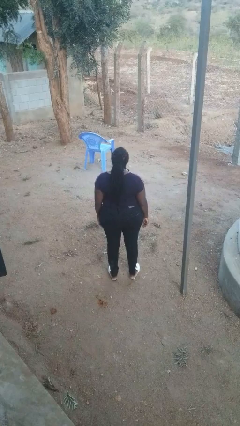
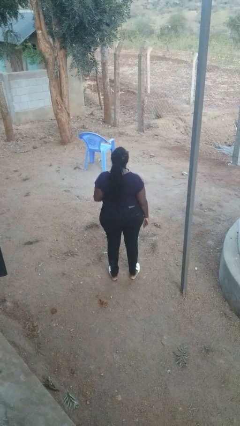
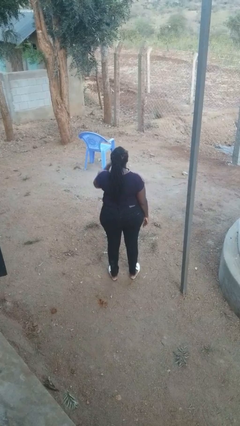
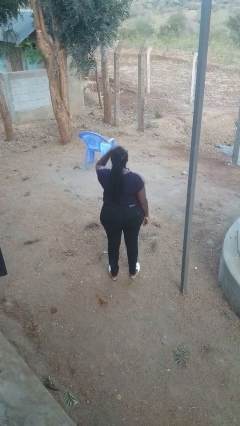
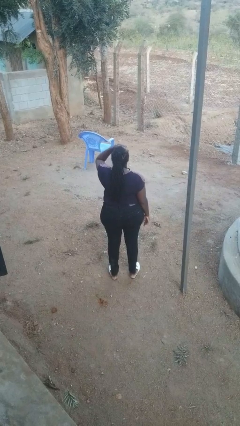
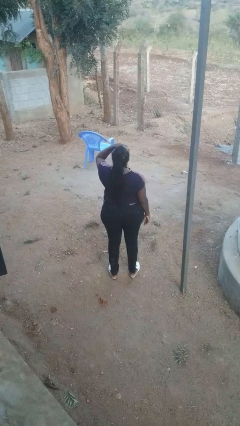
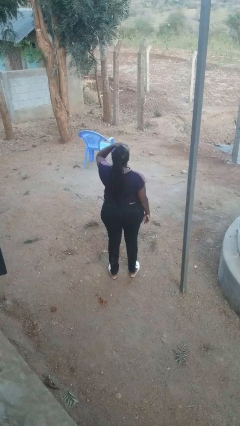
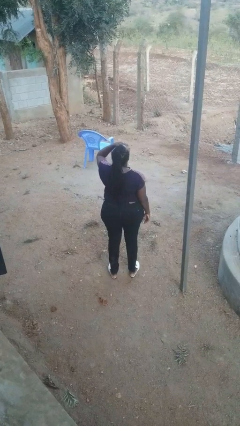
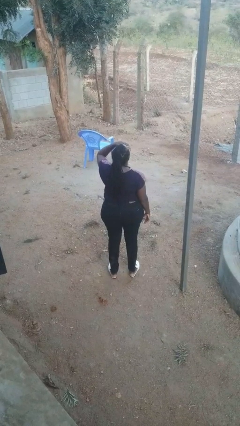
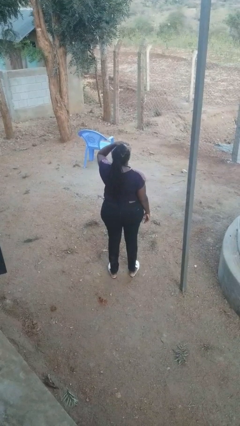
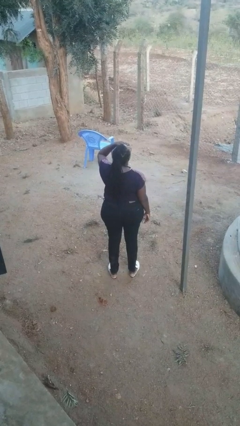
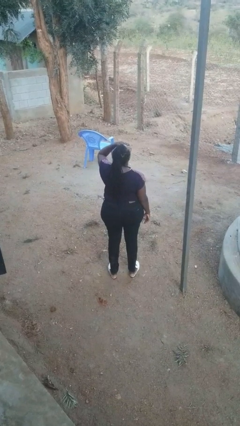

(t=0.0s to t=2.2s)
person shades eyes

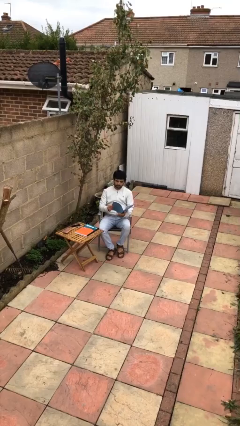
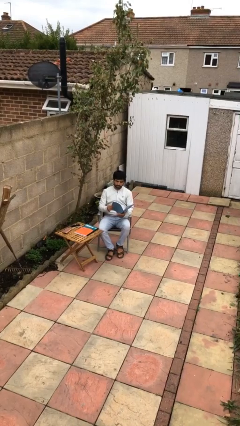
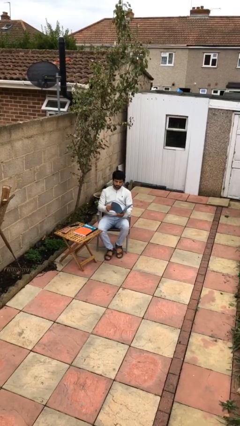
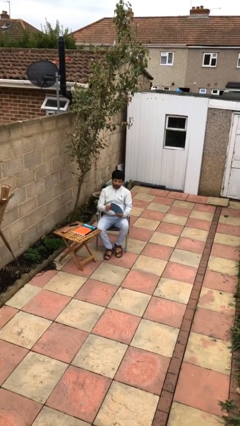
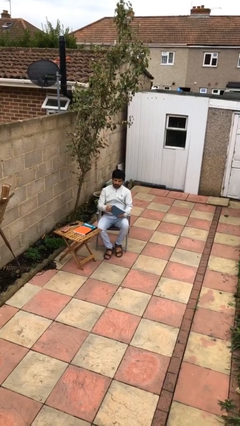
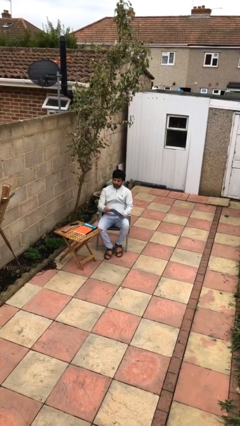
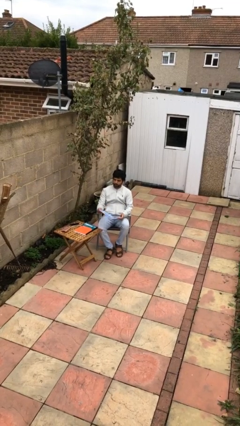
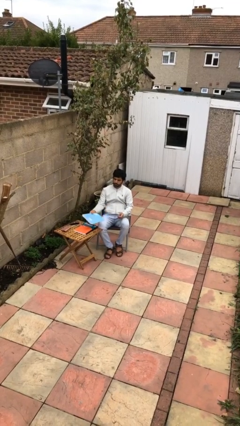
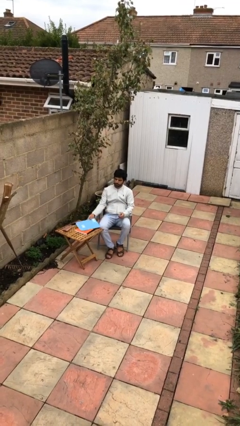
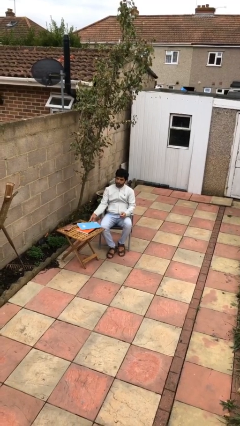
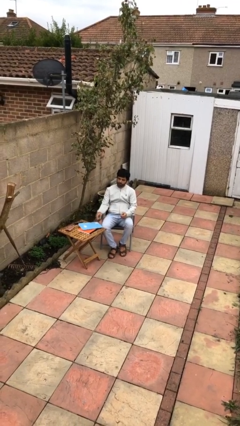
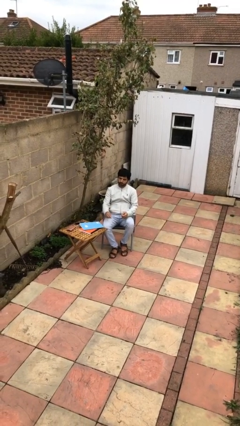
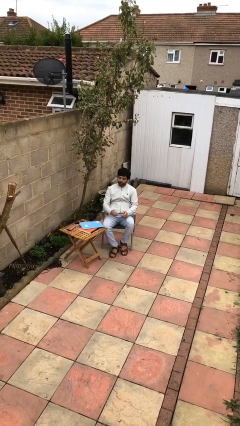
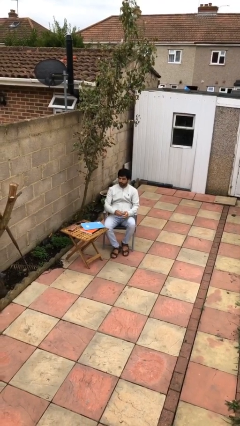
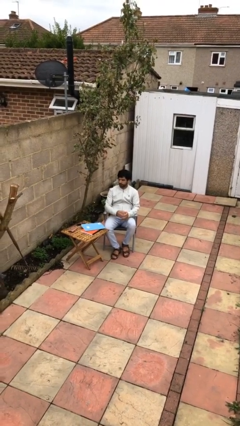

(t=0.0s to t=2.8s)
person puts down object on table

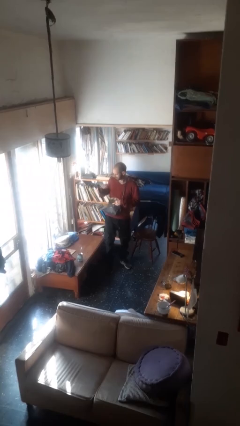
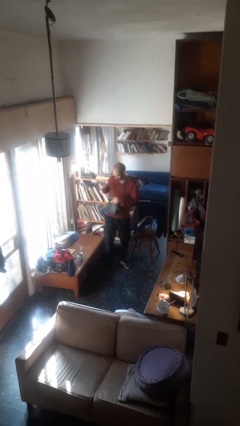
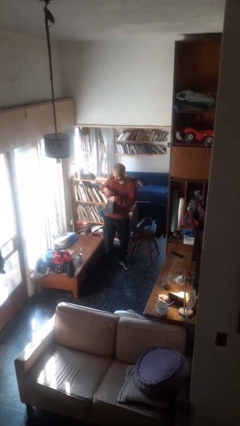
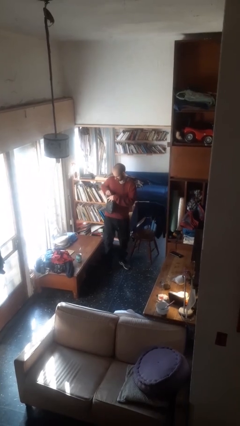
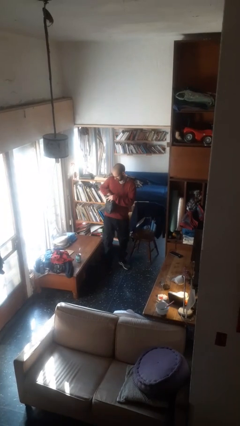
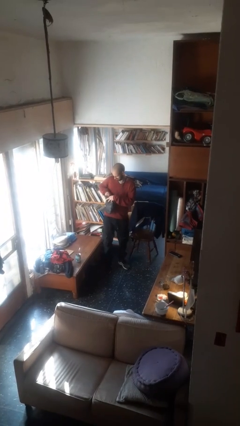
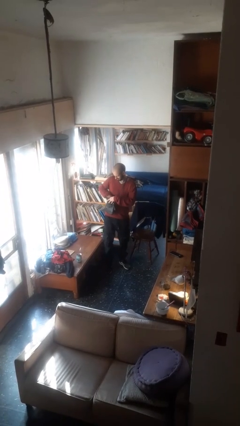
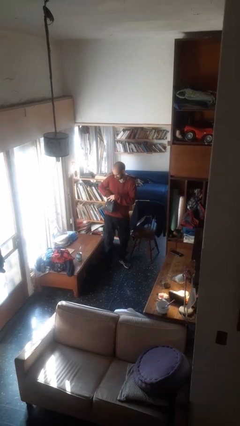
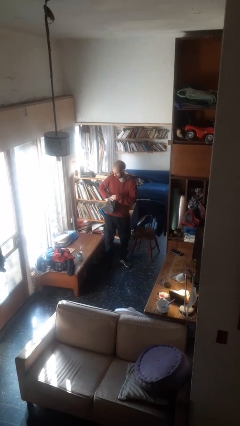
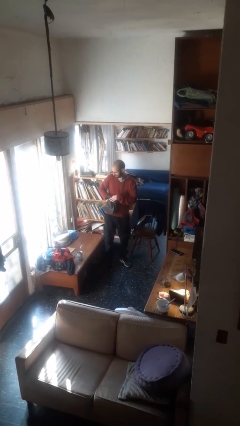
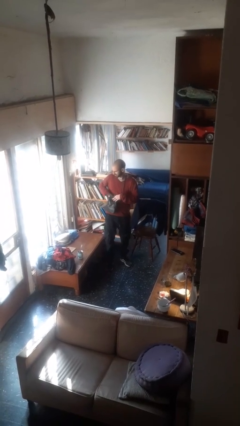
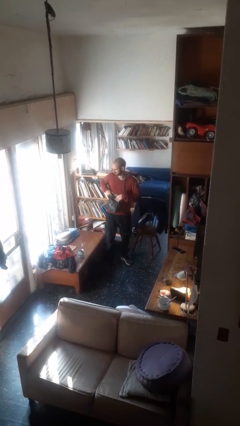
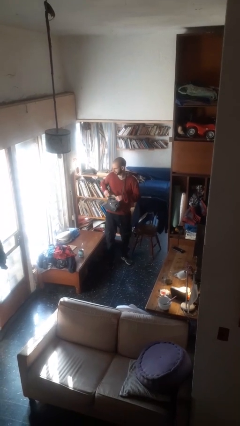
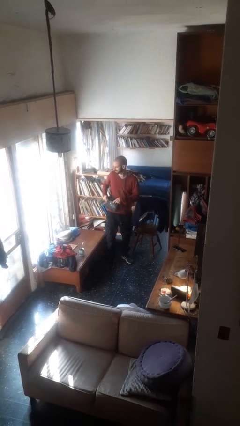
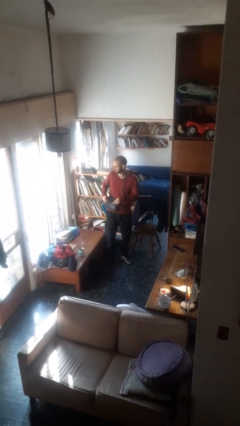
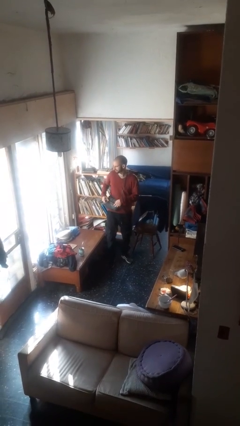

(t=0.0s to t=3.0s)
person puts object into purse

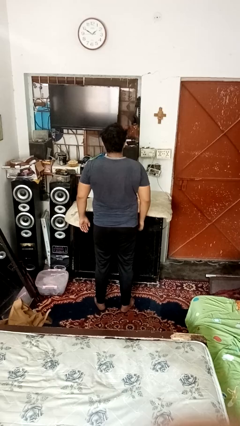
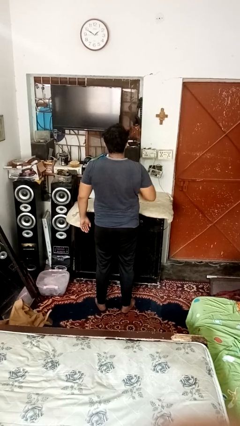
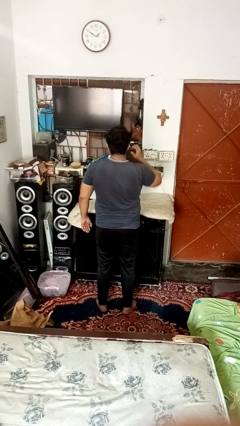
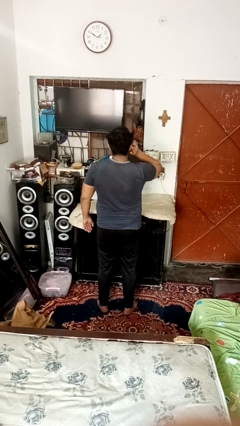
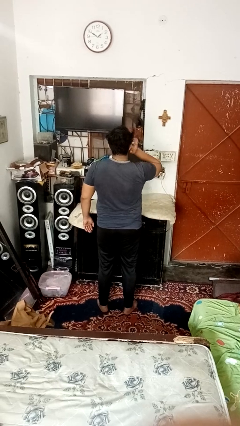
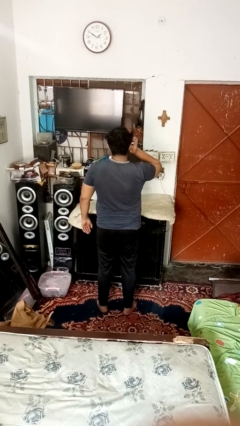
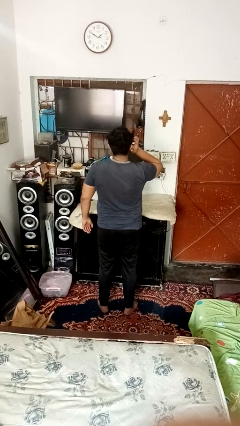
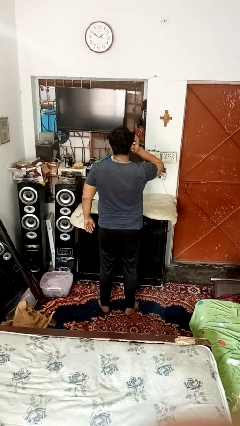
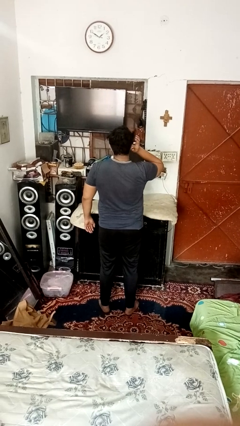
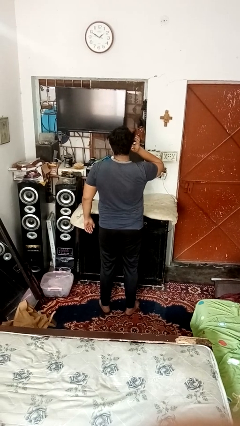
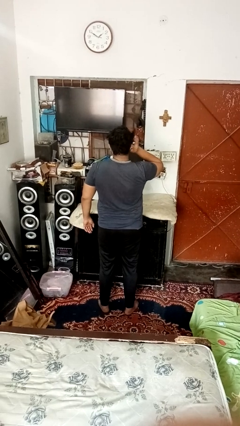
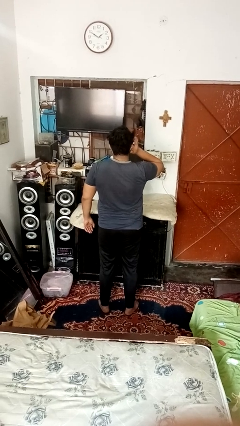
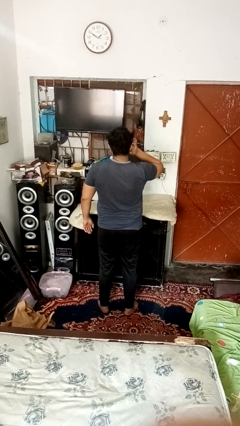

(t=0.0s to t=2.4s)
person puts fingers in ear

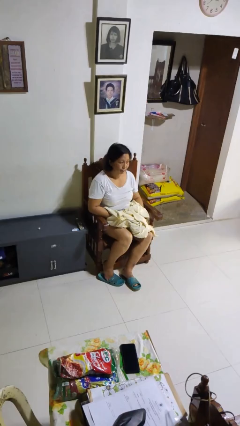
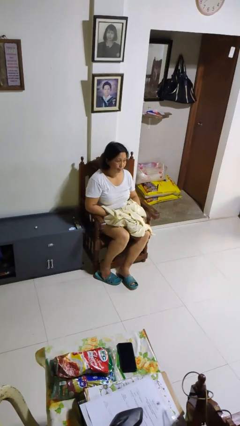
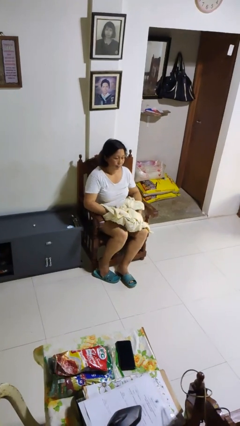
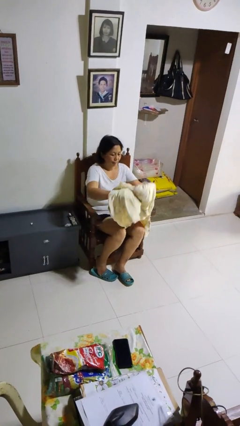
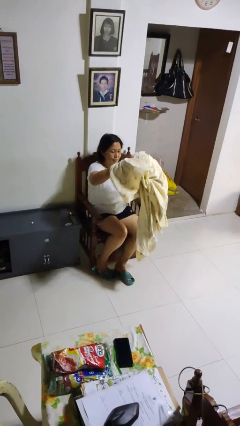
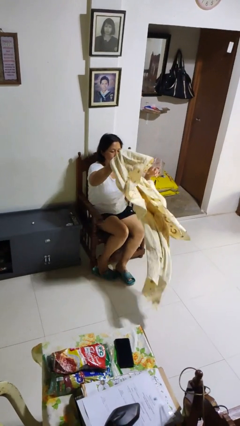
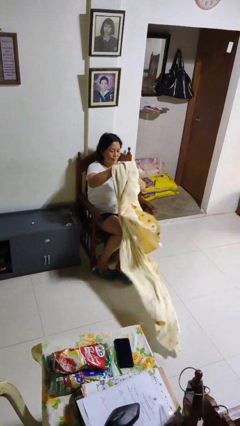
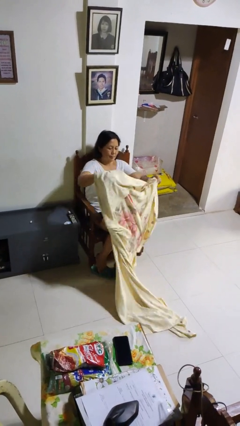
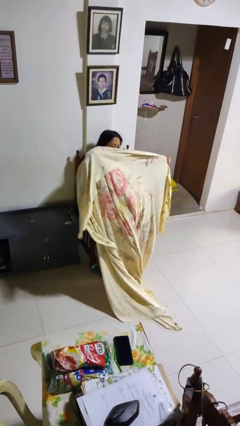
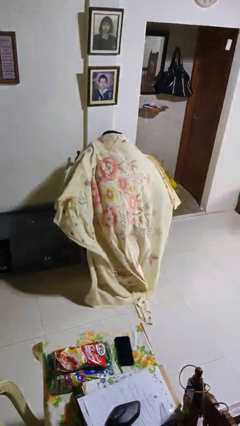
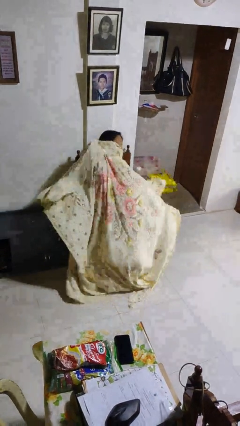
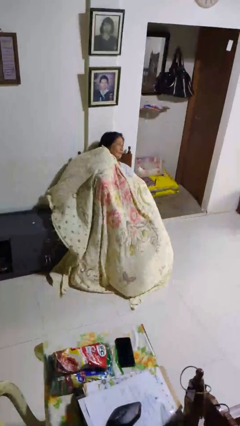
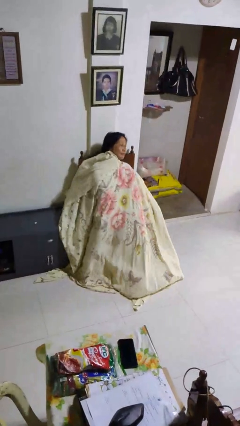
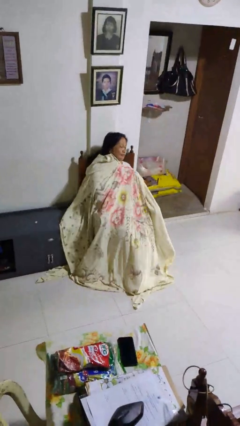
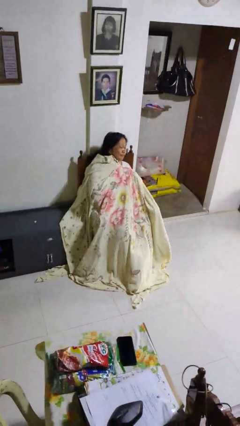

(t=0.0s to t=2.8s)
person covers with blanket

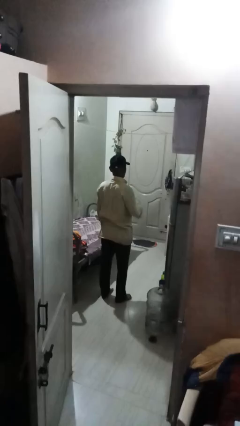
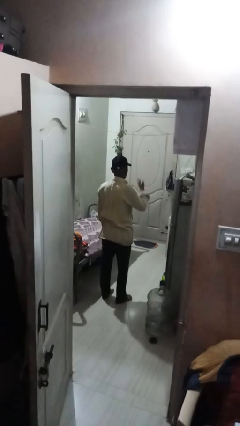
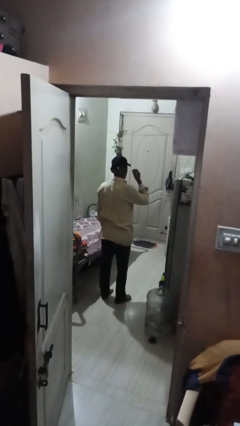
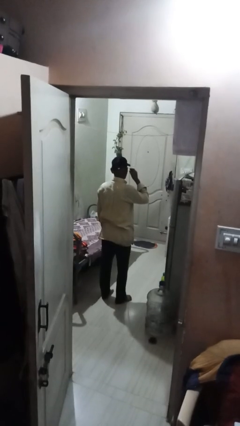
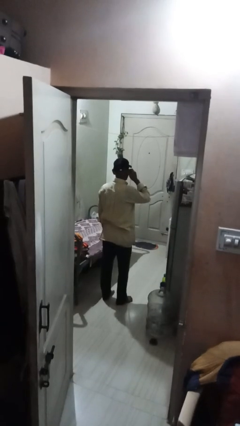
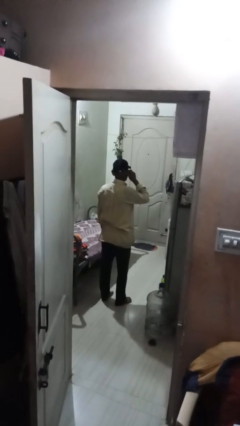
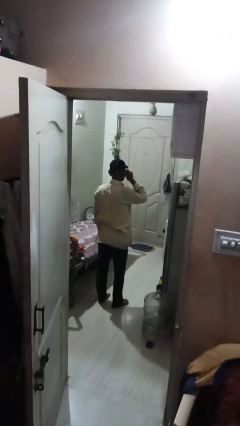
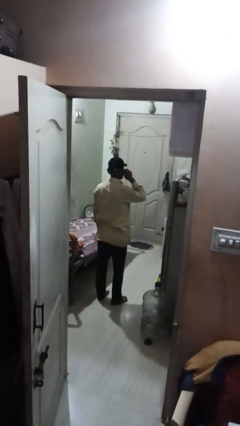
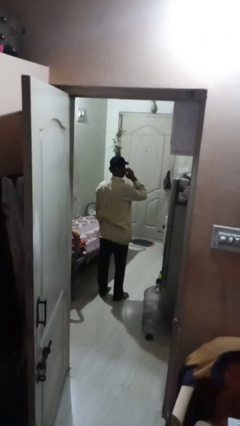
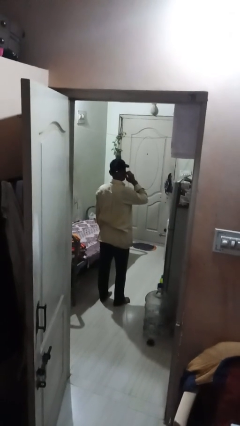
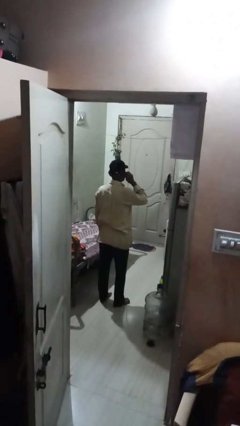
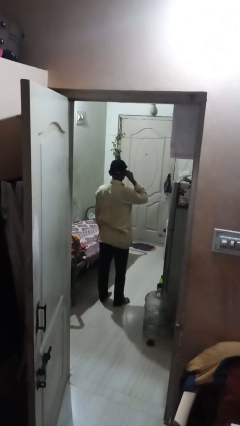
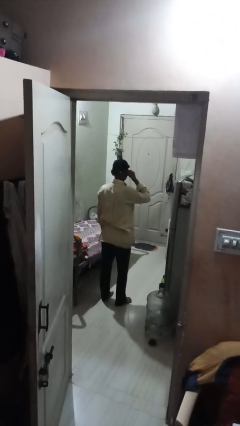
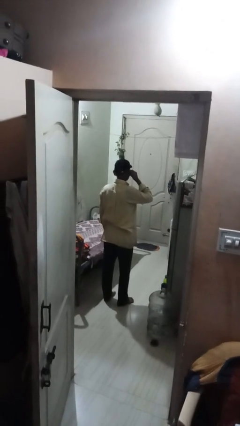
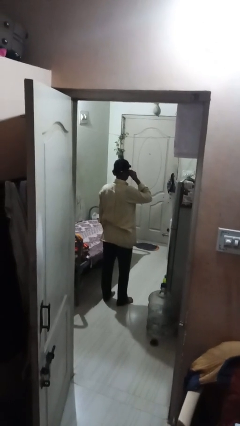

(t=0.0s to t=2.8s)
person touches earlobe

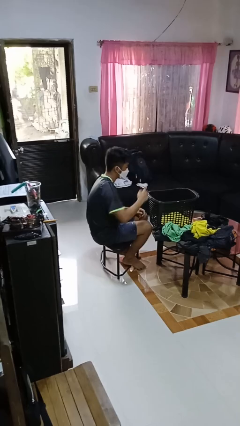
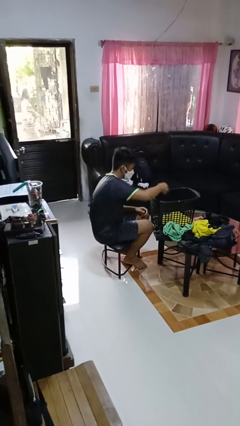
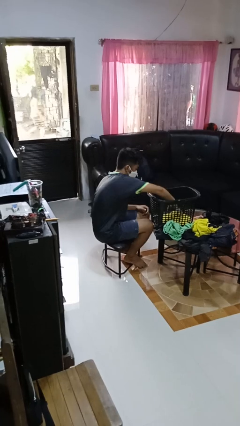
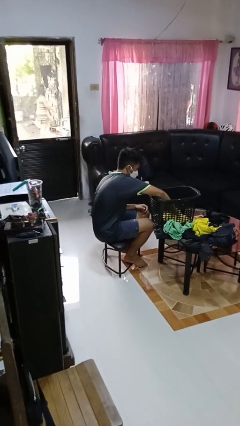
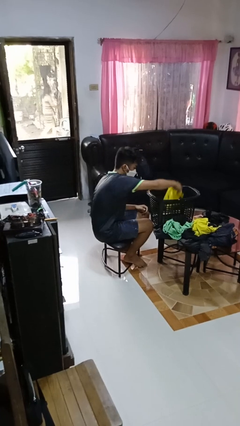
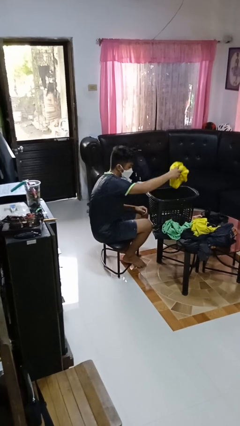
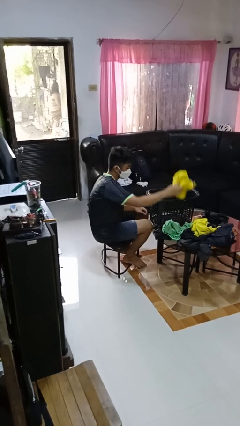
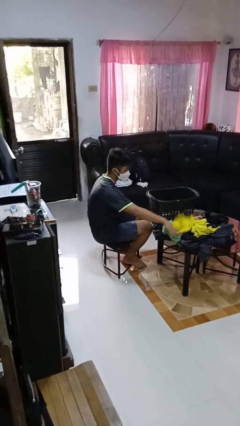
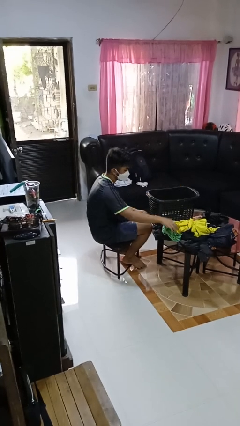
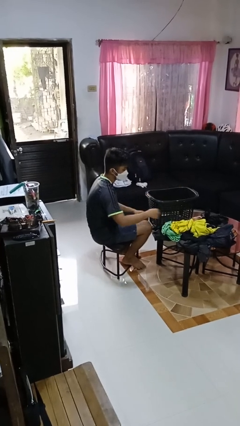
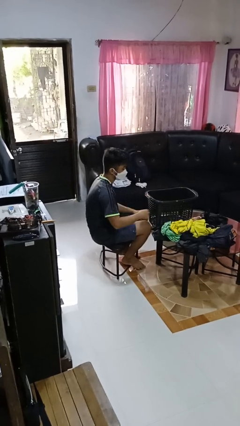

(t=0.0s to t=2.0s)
person takes object from basket
